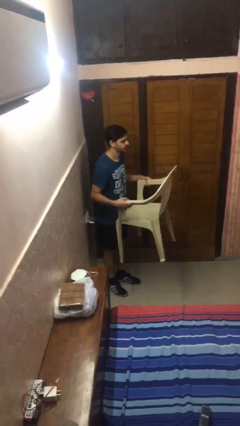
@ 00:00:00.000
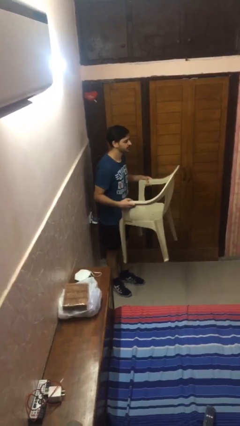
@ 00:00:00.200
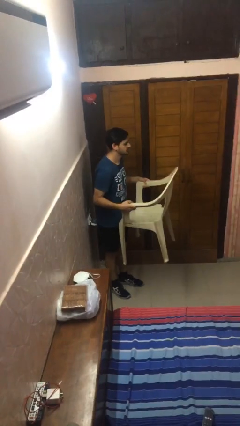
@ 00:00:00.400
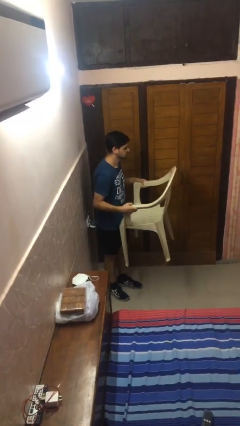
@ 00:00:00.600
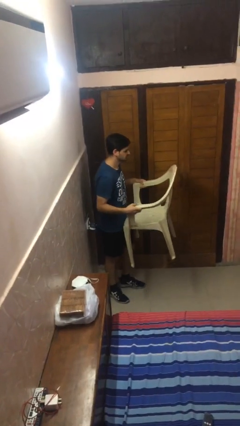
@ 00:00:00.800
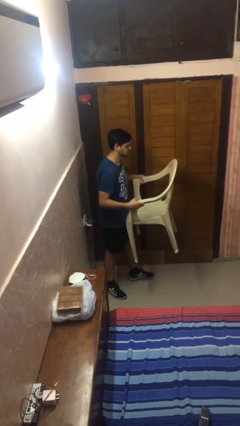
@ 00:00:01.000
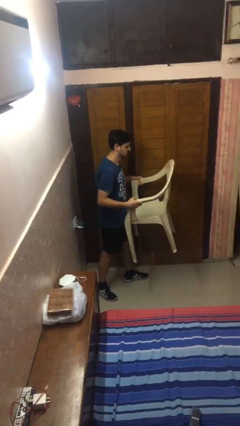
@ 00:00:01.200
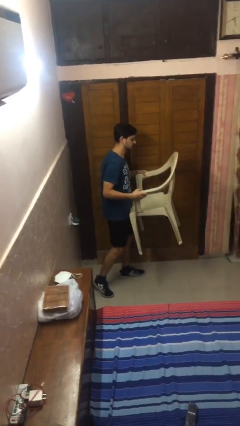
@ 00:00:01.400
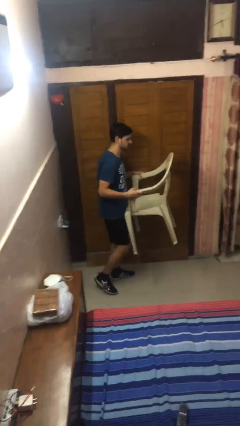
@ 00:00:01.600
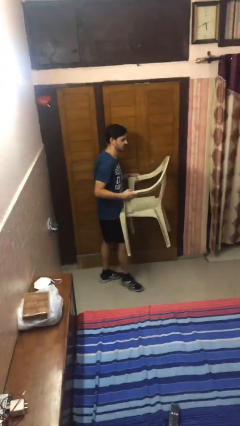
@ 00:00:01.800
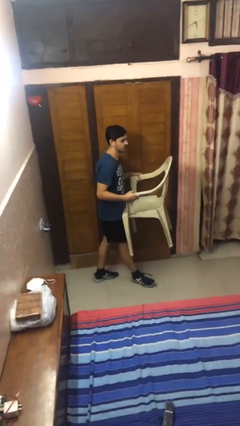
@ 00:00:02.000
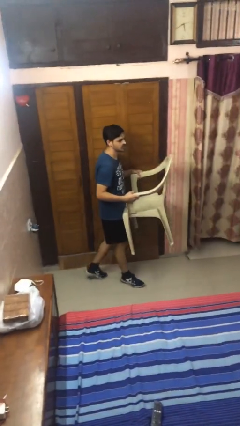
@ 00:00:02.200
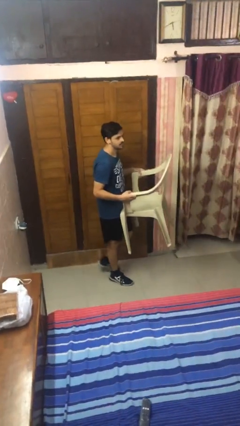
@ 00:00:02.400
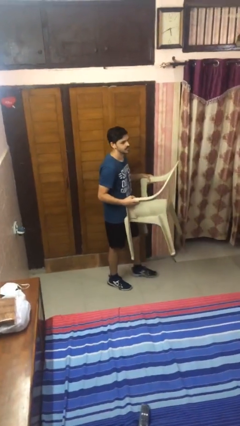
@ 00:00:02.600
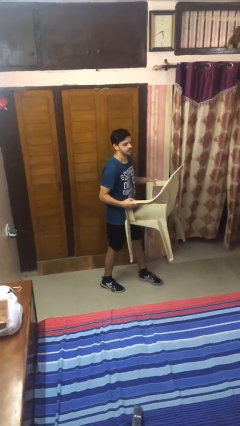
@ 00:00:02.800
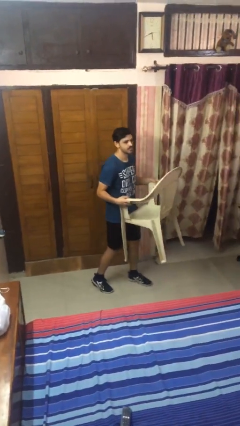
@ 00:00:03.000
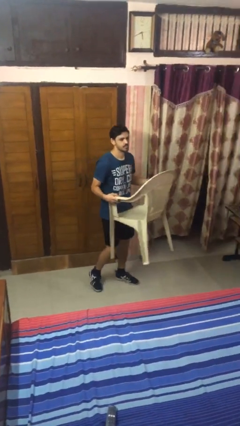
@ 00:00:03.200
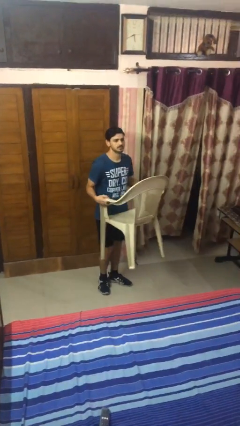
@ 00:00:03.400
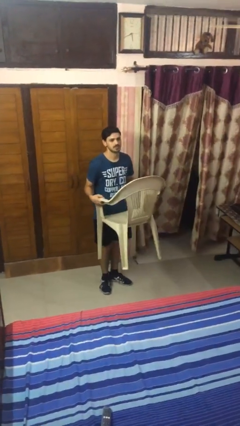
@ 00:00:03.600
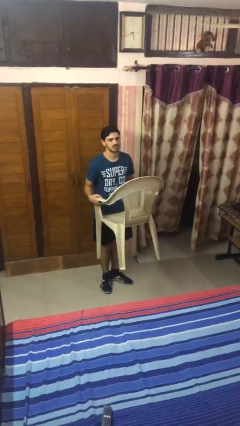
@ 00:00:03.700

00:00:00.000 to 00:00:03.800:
person carries furniture

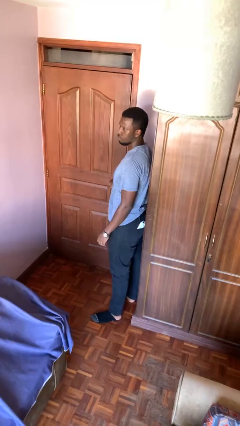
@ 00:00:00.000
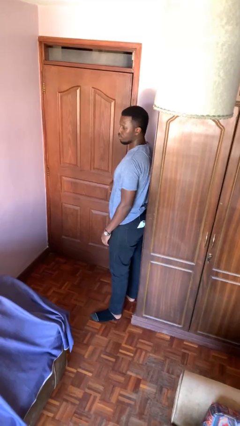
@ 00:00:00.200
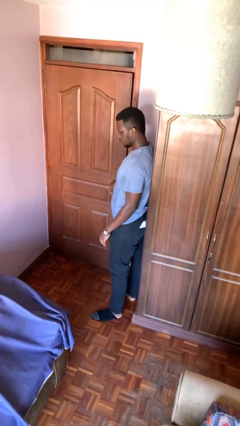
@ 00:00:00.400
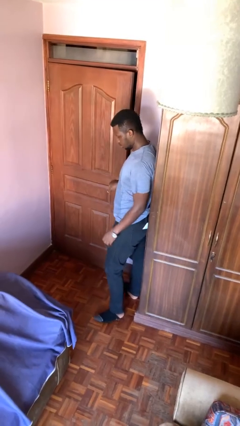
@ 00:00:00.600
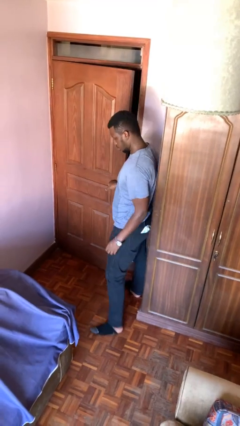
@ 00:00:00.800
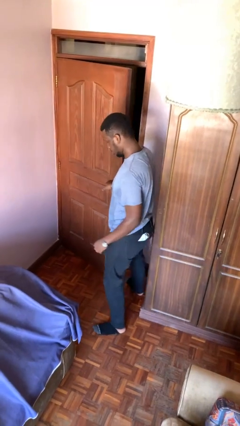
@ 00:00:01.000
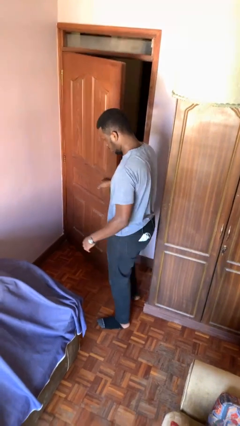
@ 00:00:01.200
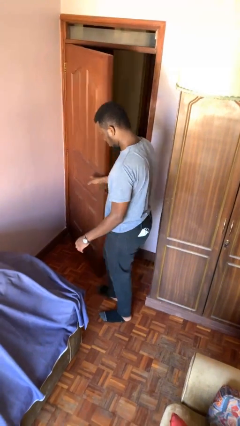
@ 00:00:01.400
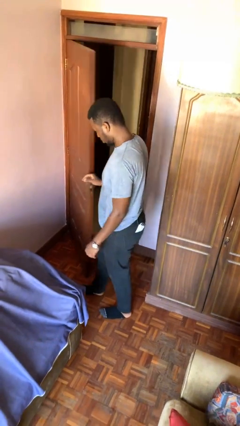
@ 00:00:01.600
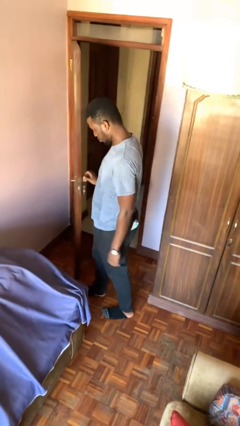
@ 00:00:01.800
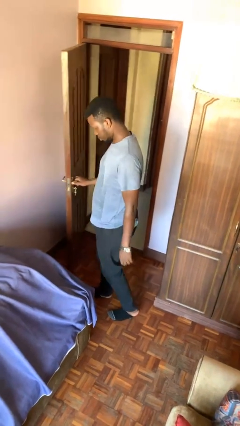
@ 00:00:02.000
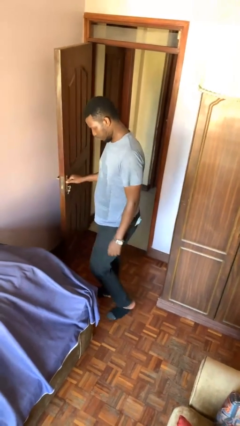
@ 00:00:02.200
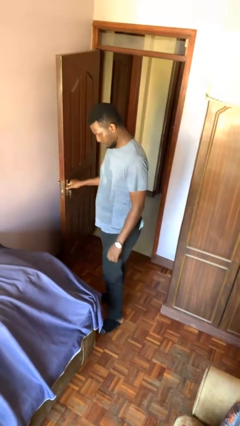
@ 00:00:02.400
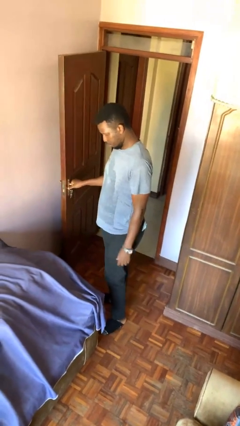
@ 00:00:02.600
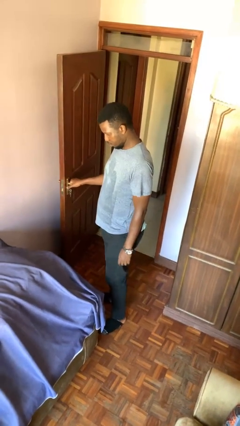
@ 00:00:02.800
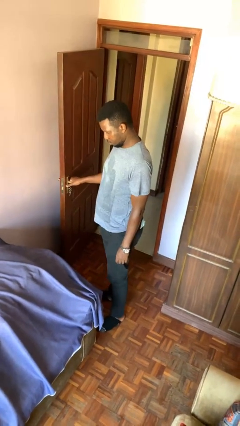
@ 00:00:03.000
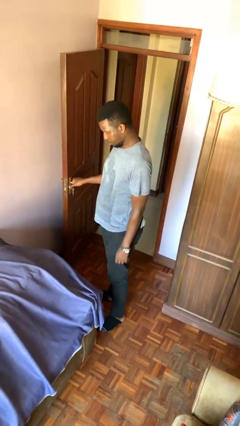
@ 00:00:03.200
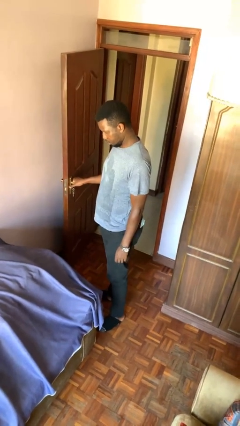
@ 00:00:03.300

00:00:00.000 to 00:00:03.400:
person opens facility door

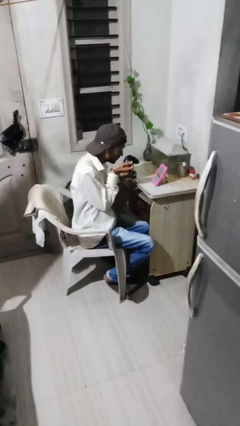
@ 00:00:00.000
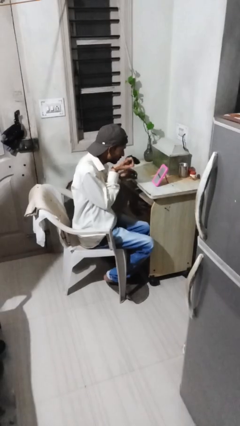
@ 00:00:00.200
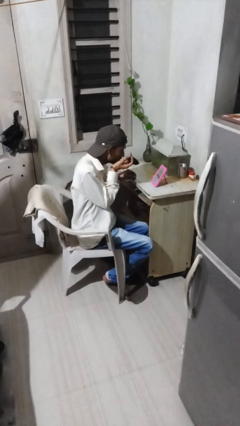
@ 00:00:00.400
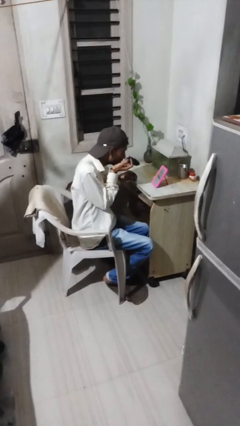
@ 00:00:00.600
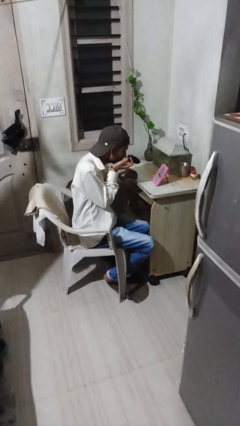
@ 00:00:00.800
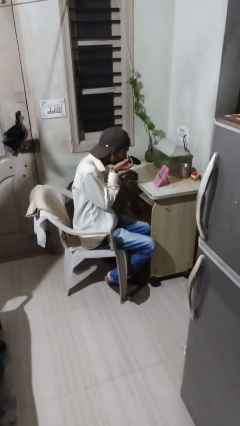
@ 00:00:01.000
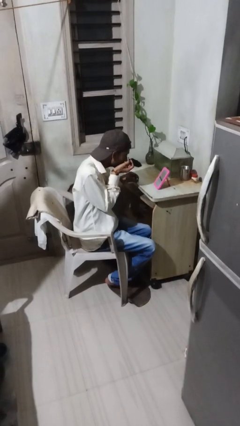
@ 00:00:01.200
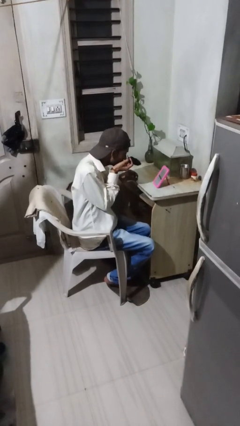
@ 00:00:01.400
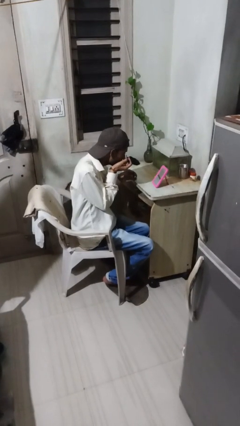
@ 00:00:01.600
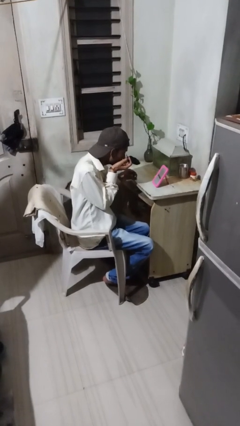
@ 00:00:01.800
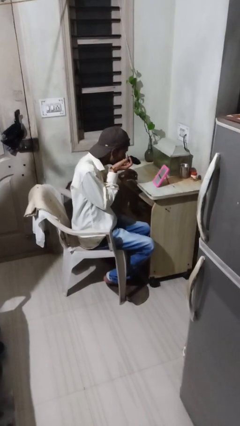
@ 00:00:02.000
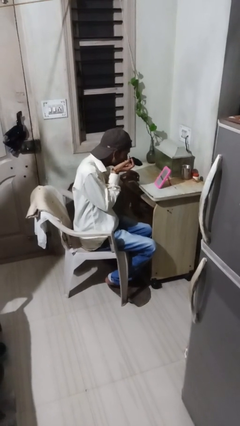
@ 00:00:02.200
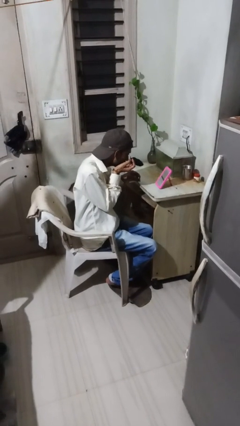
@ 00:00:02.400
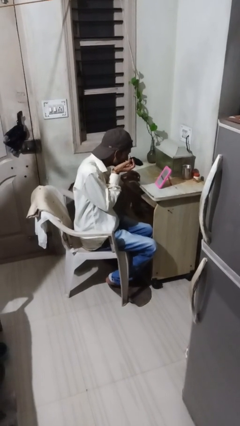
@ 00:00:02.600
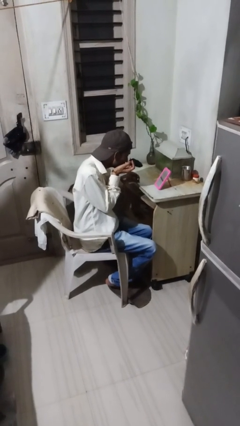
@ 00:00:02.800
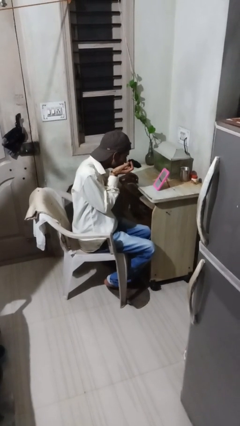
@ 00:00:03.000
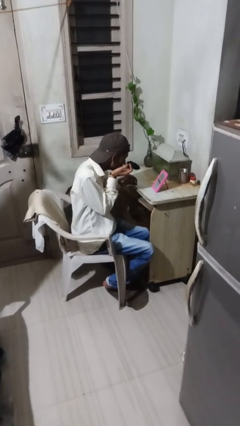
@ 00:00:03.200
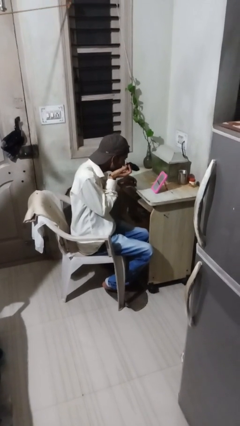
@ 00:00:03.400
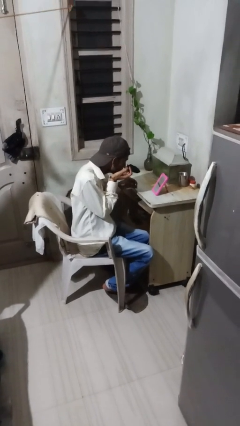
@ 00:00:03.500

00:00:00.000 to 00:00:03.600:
person applies eye makeup

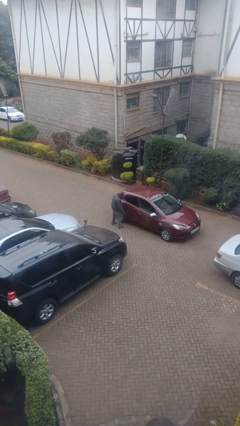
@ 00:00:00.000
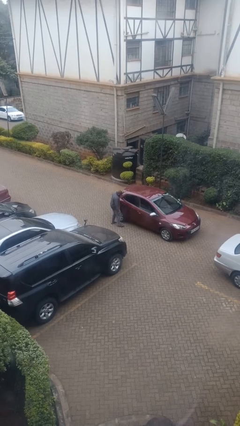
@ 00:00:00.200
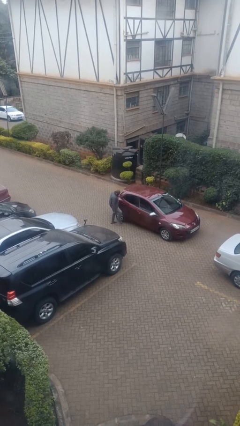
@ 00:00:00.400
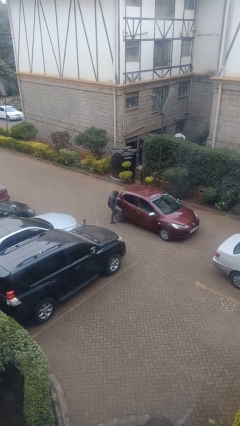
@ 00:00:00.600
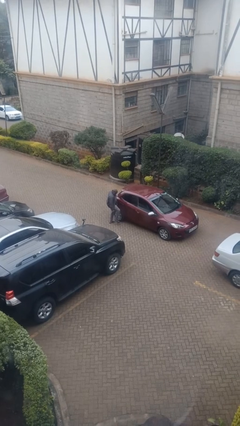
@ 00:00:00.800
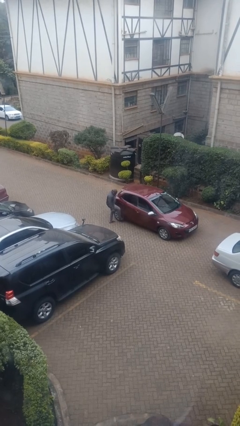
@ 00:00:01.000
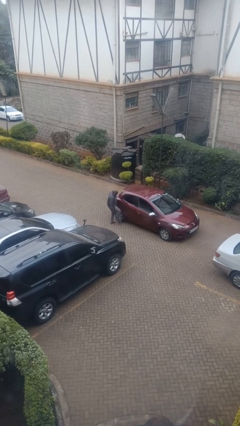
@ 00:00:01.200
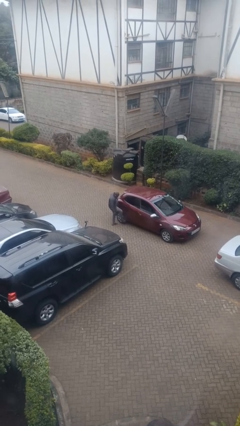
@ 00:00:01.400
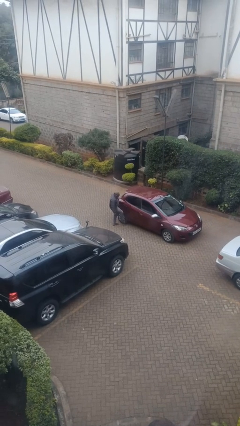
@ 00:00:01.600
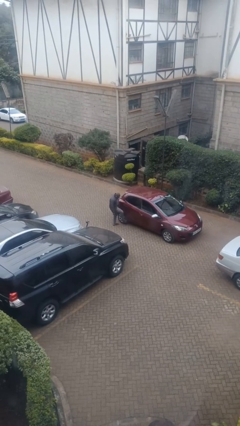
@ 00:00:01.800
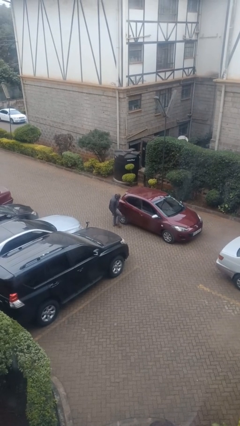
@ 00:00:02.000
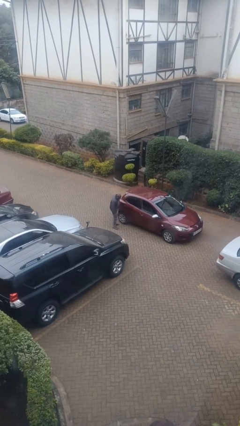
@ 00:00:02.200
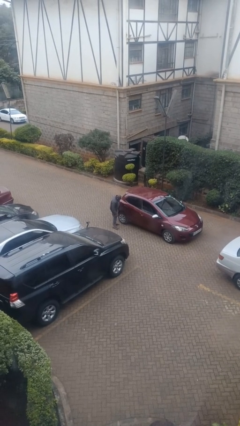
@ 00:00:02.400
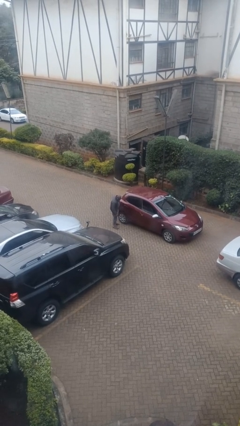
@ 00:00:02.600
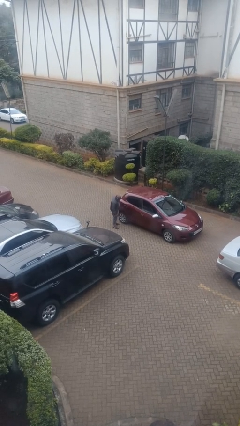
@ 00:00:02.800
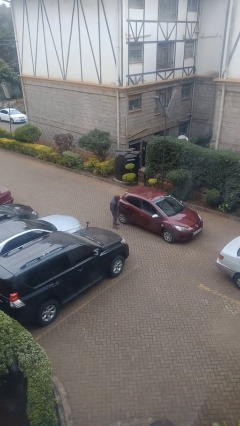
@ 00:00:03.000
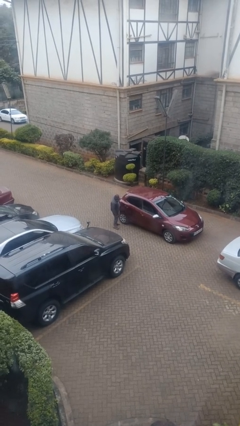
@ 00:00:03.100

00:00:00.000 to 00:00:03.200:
person kicks car tires

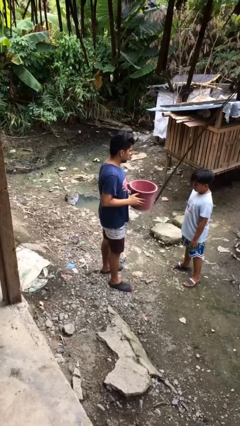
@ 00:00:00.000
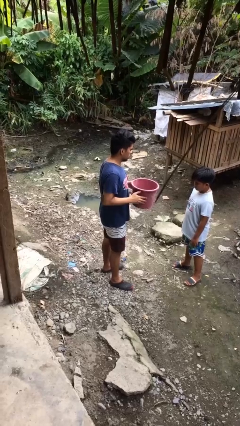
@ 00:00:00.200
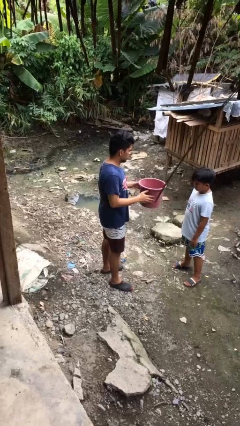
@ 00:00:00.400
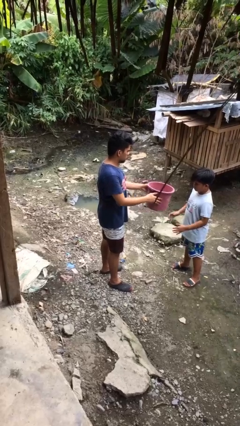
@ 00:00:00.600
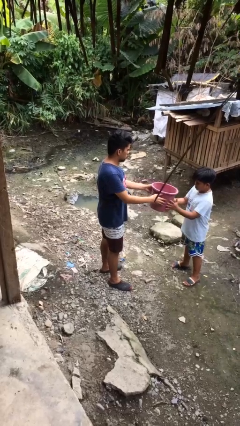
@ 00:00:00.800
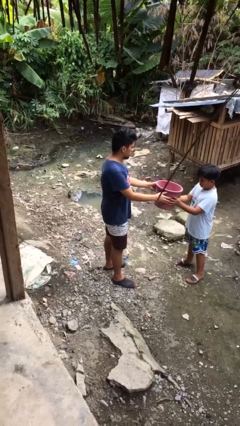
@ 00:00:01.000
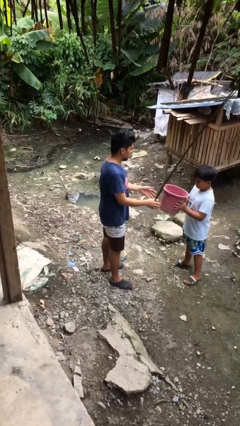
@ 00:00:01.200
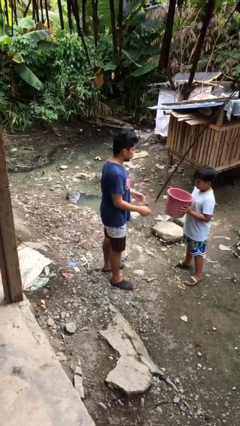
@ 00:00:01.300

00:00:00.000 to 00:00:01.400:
person transfers object to person

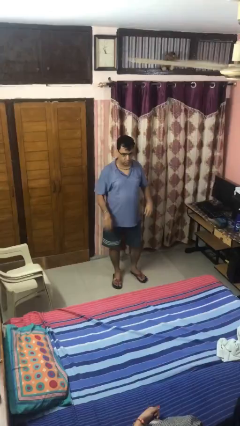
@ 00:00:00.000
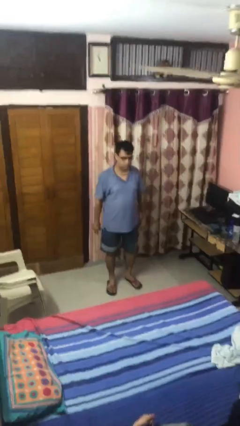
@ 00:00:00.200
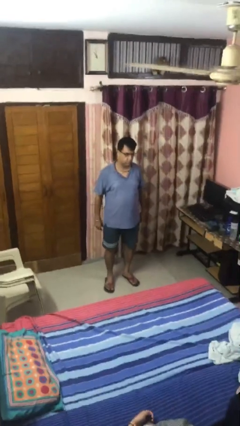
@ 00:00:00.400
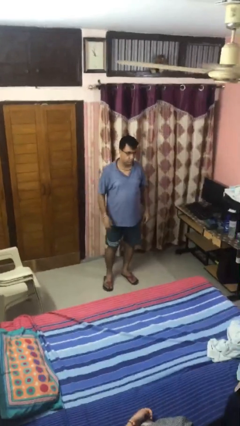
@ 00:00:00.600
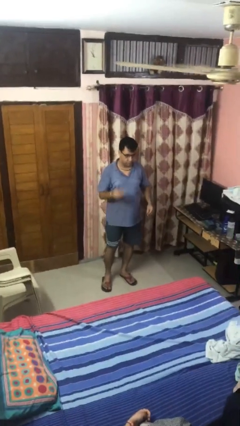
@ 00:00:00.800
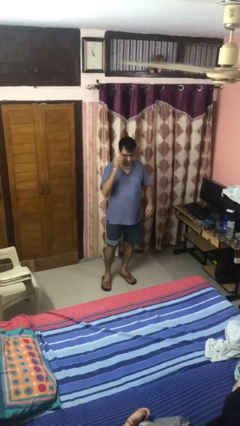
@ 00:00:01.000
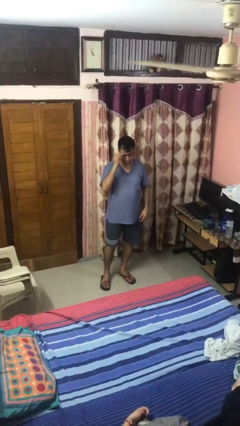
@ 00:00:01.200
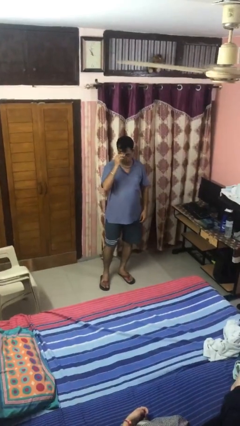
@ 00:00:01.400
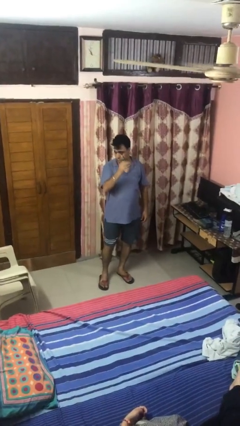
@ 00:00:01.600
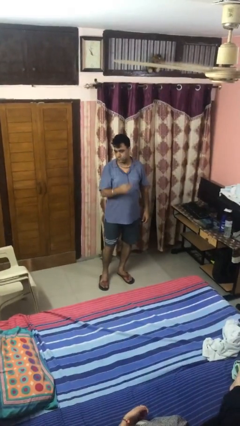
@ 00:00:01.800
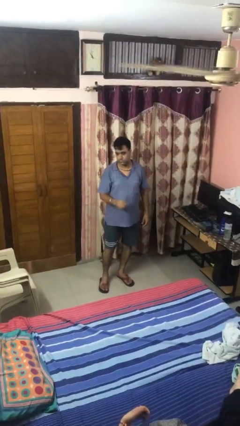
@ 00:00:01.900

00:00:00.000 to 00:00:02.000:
person takes off glasses
